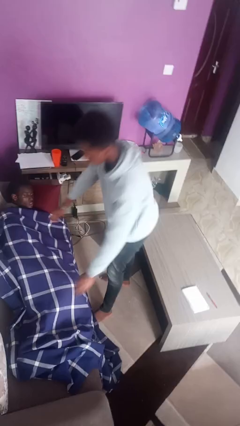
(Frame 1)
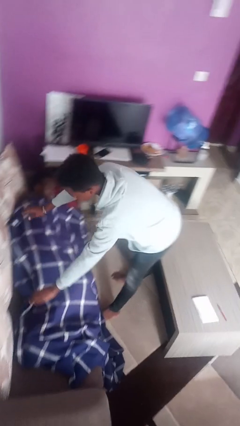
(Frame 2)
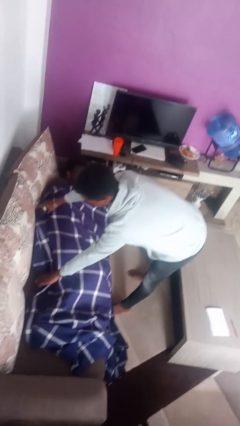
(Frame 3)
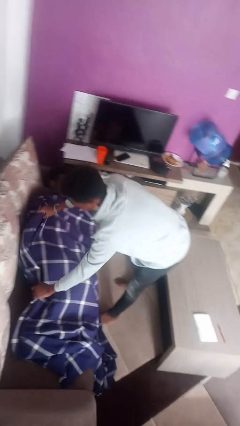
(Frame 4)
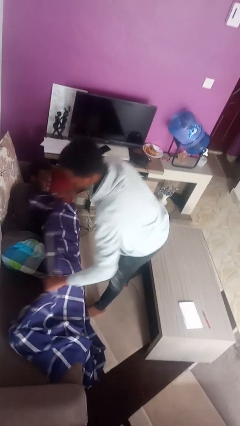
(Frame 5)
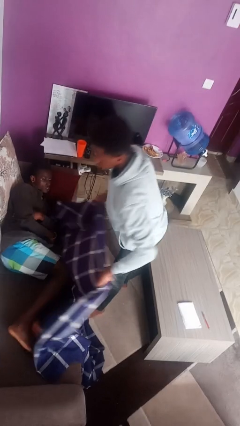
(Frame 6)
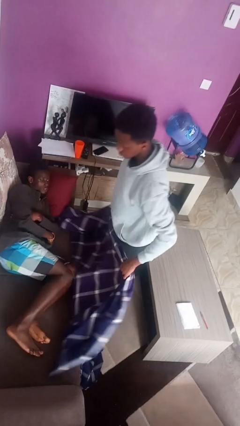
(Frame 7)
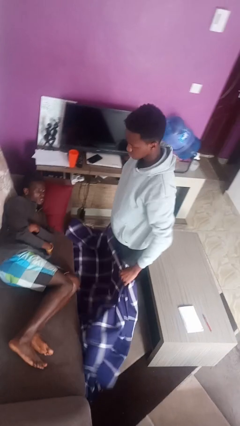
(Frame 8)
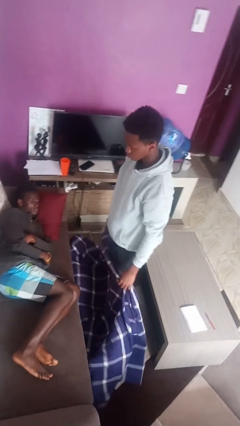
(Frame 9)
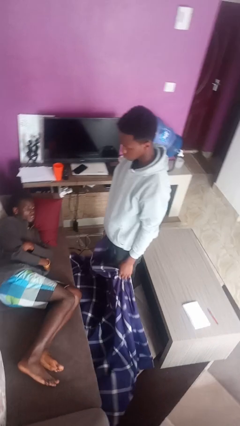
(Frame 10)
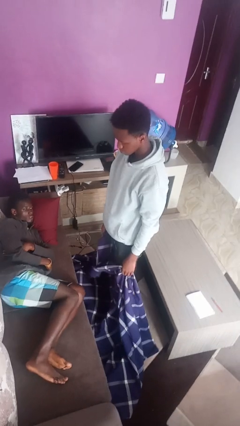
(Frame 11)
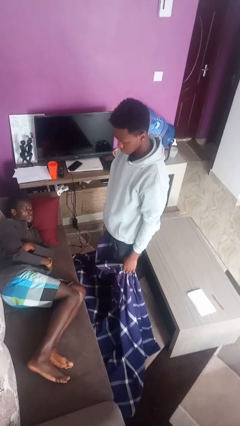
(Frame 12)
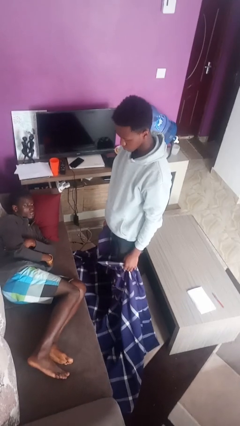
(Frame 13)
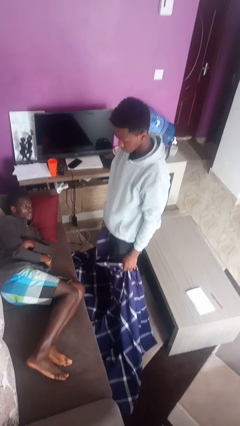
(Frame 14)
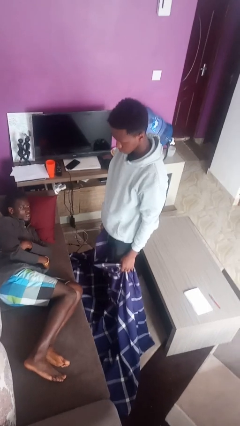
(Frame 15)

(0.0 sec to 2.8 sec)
person uncovers friend with blanket

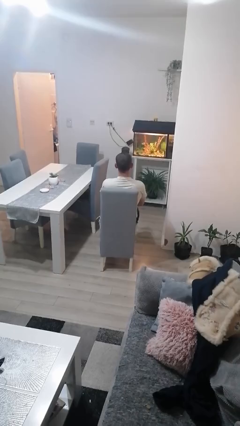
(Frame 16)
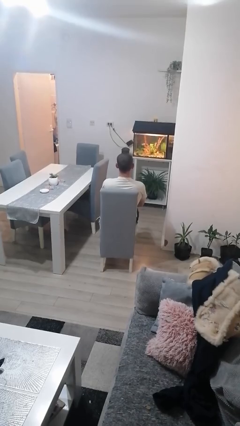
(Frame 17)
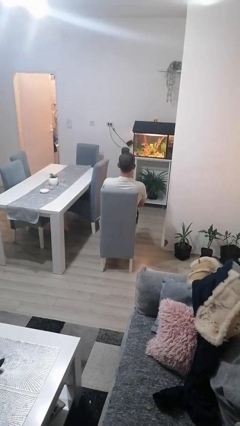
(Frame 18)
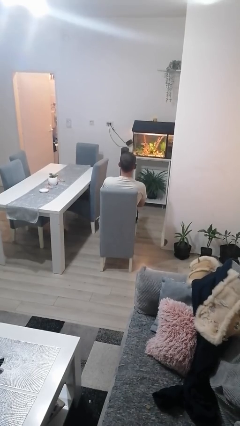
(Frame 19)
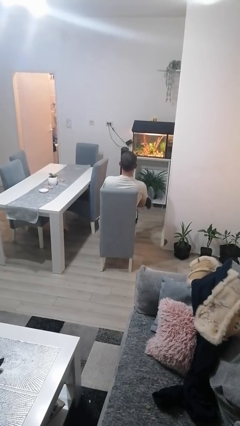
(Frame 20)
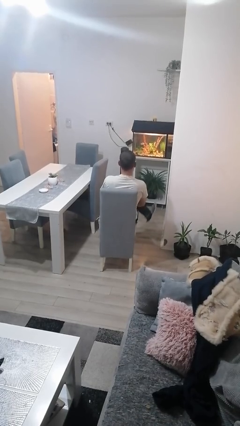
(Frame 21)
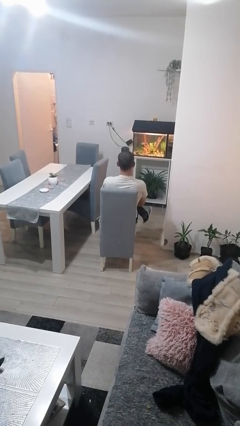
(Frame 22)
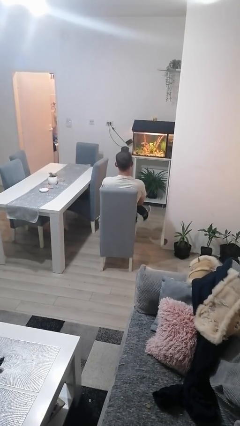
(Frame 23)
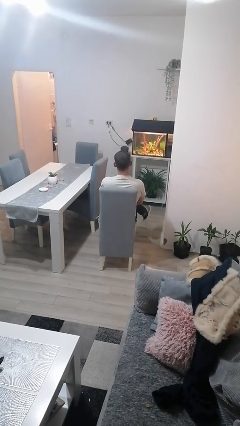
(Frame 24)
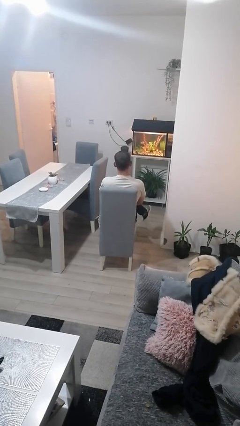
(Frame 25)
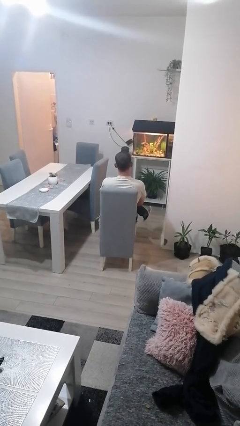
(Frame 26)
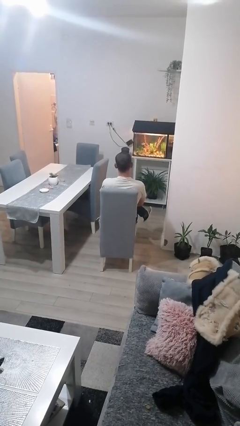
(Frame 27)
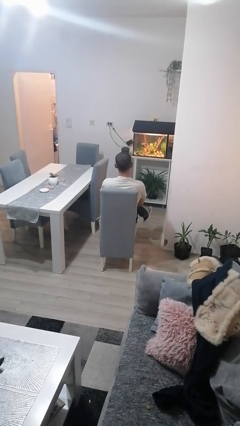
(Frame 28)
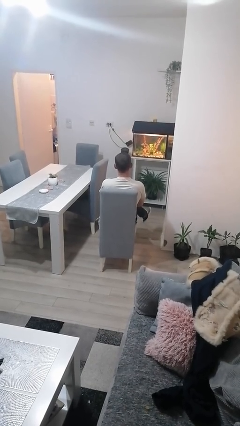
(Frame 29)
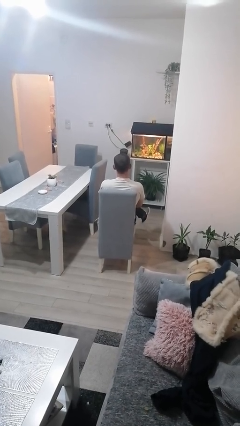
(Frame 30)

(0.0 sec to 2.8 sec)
person crosses legs

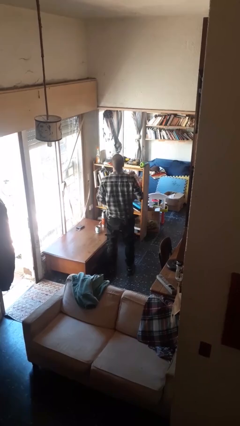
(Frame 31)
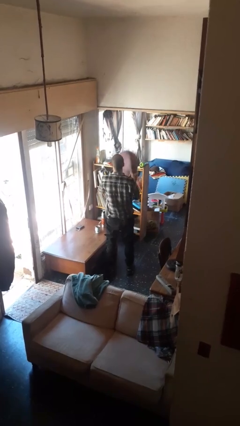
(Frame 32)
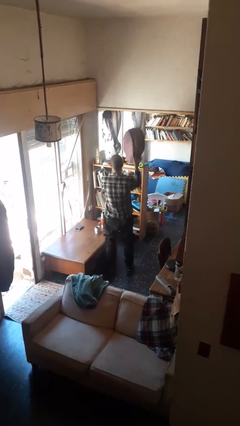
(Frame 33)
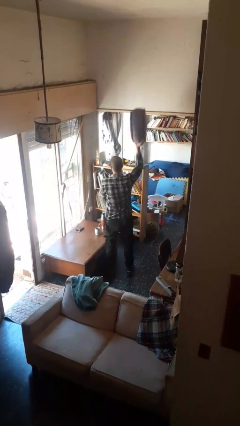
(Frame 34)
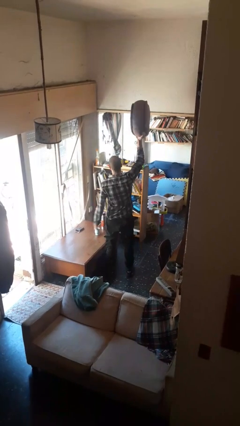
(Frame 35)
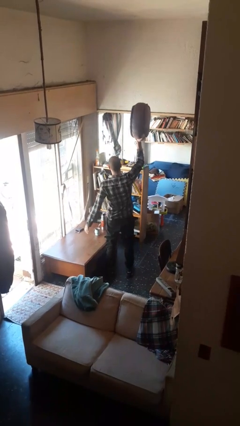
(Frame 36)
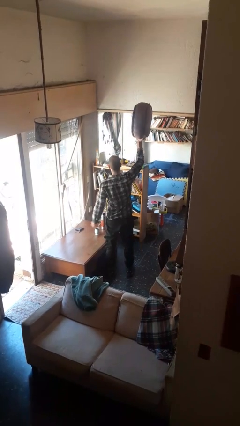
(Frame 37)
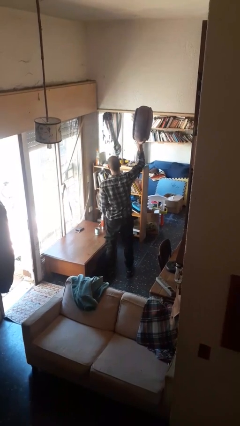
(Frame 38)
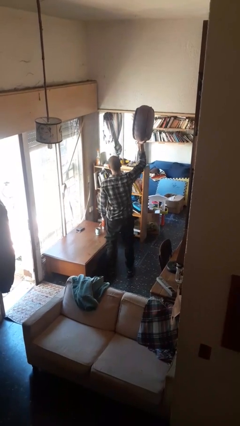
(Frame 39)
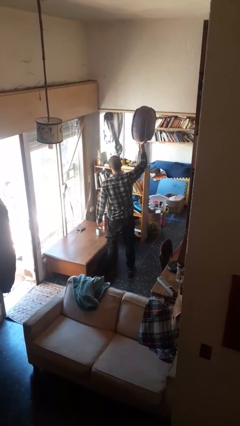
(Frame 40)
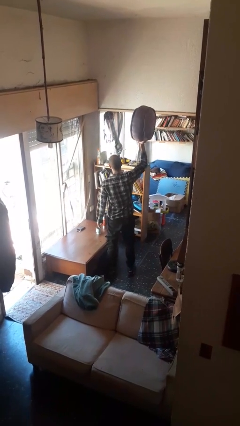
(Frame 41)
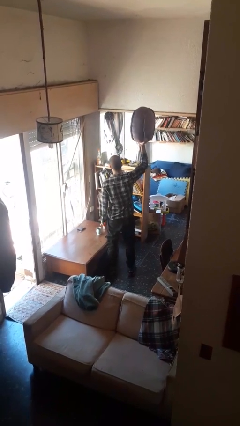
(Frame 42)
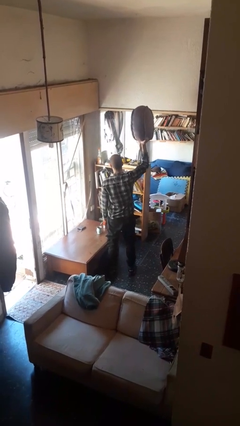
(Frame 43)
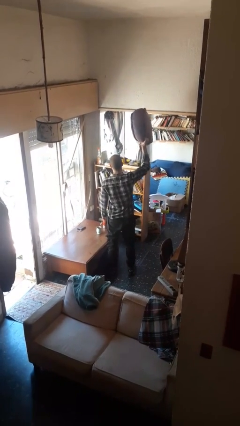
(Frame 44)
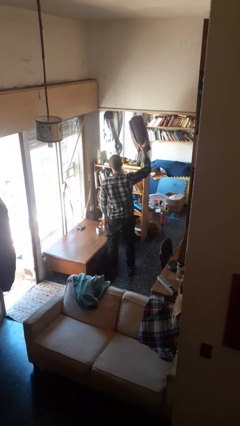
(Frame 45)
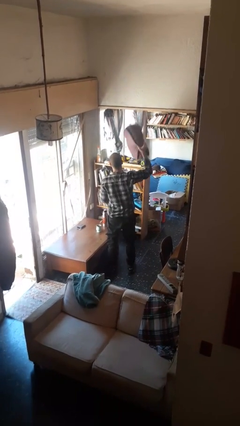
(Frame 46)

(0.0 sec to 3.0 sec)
person holds object above head

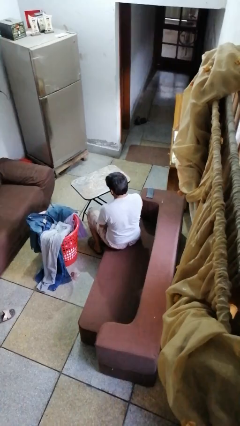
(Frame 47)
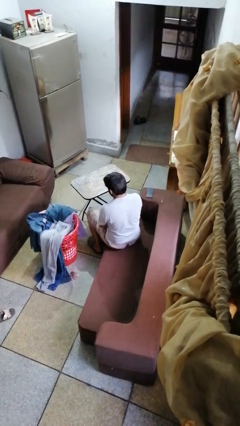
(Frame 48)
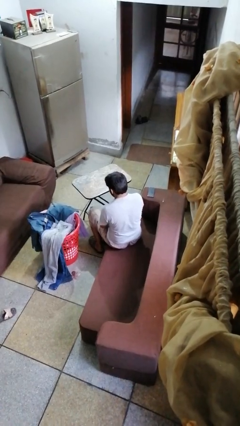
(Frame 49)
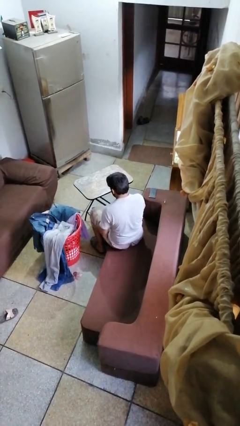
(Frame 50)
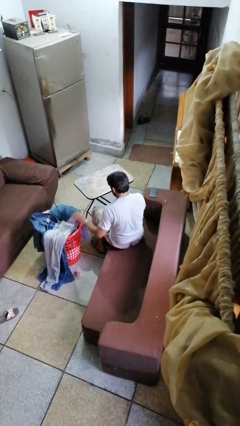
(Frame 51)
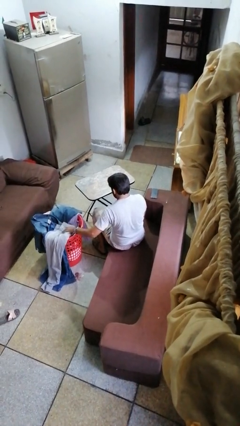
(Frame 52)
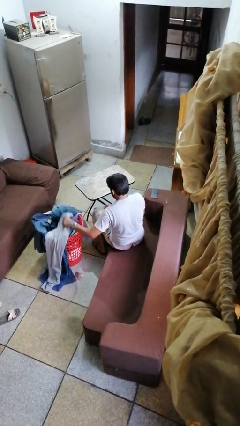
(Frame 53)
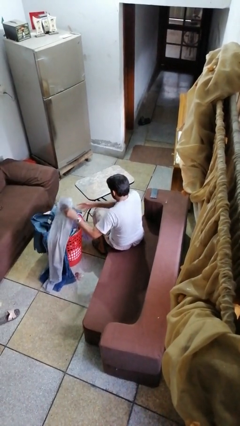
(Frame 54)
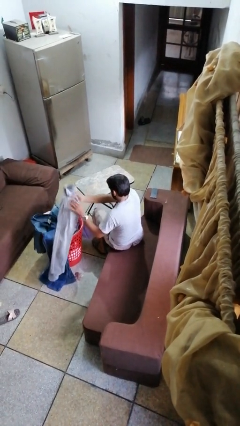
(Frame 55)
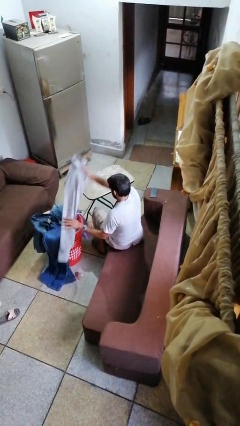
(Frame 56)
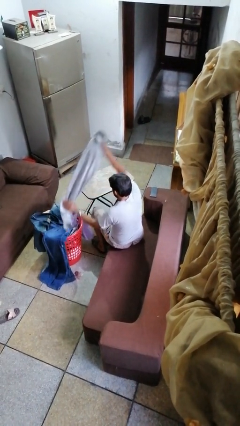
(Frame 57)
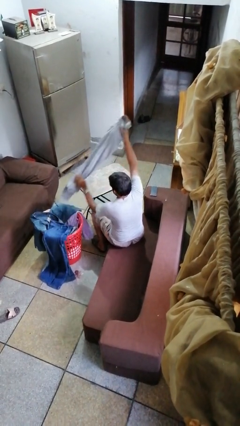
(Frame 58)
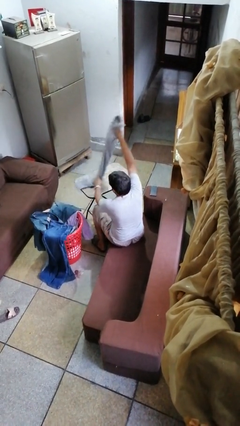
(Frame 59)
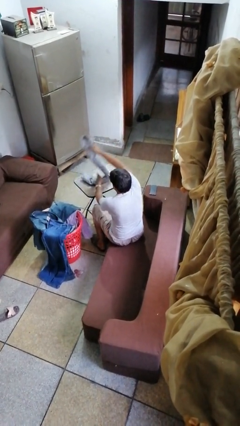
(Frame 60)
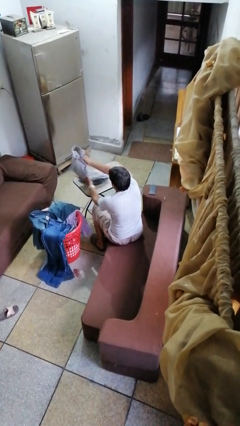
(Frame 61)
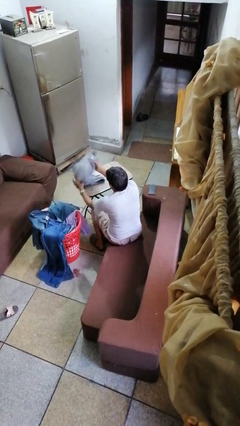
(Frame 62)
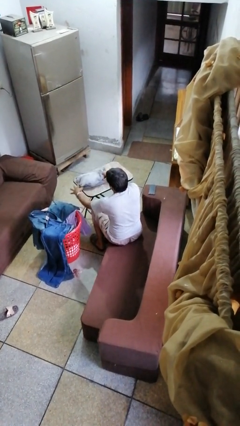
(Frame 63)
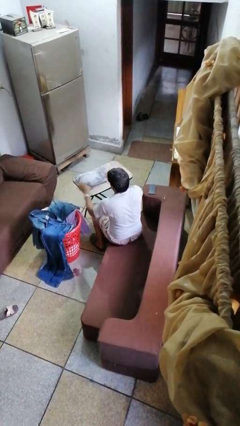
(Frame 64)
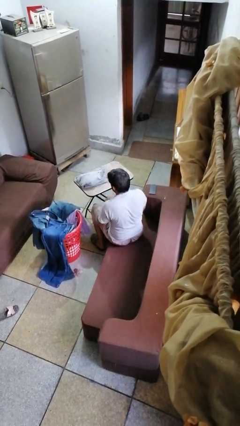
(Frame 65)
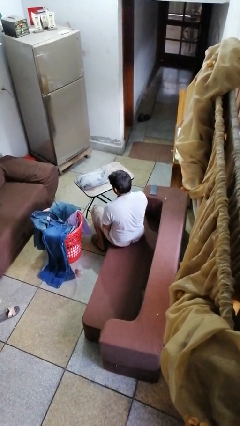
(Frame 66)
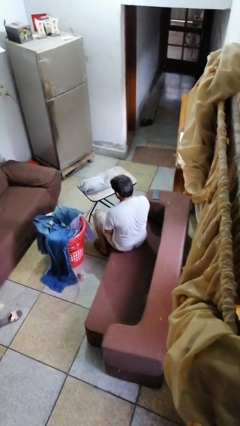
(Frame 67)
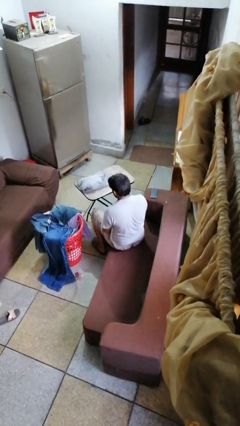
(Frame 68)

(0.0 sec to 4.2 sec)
person folds pants

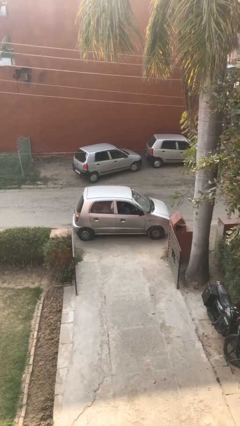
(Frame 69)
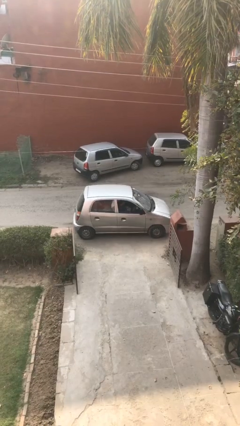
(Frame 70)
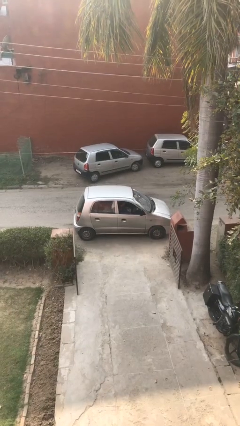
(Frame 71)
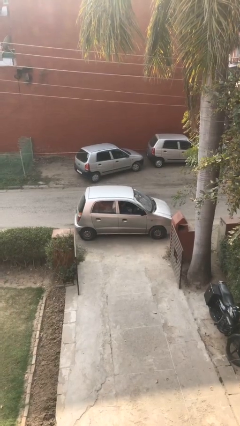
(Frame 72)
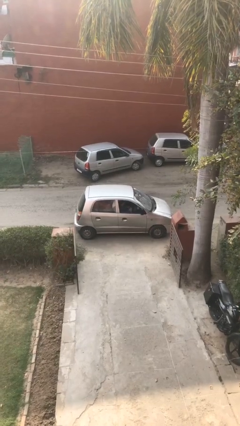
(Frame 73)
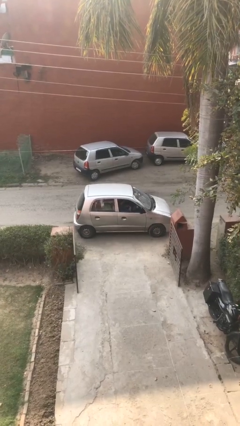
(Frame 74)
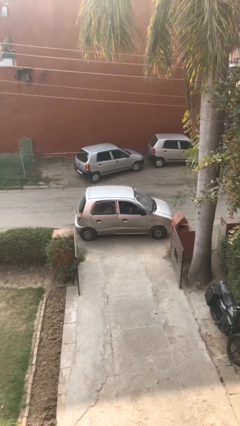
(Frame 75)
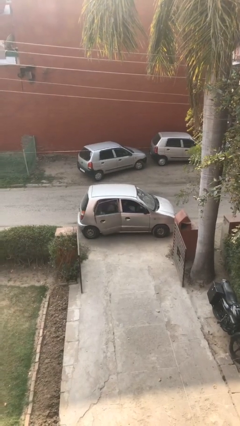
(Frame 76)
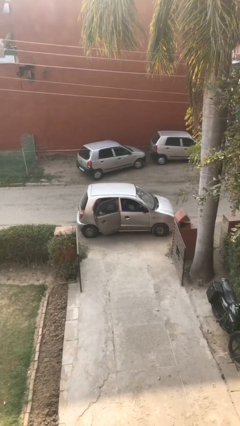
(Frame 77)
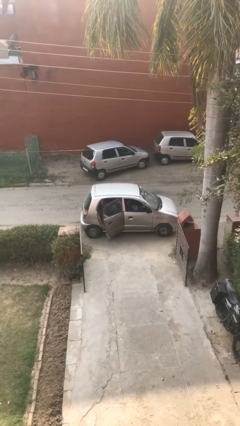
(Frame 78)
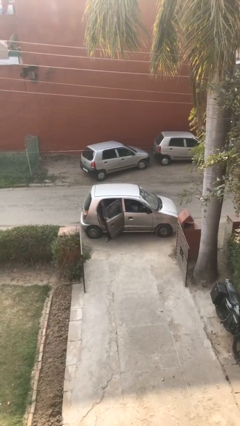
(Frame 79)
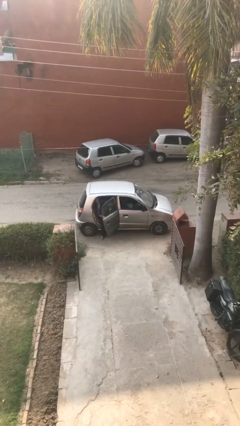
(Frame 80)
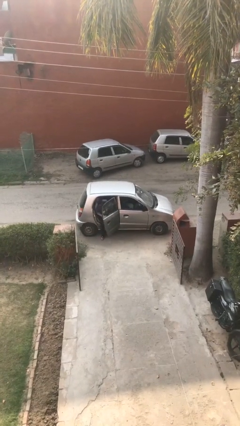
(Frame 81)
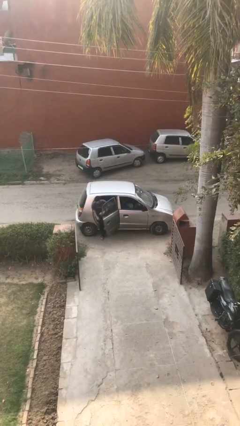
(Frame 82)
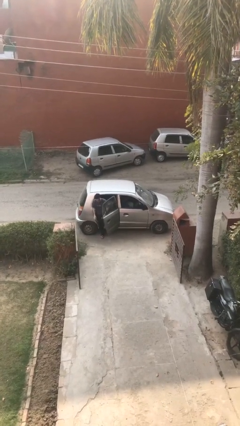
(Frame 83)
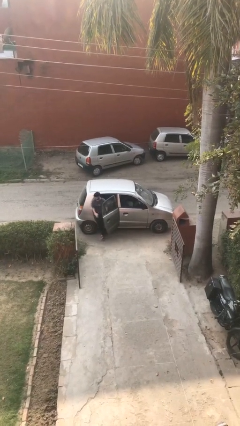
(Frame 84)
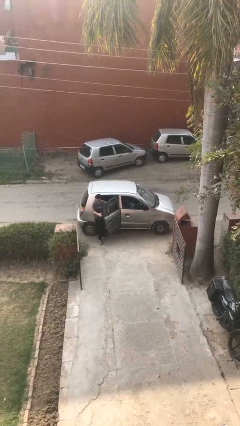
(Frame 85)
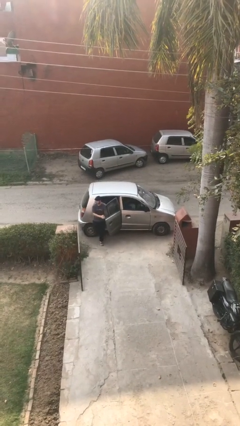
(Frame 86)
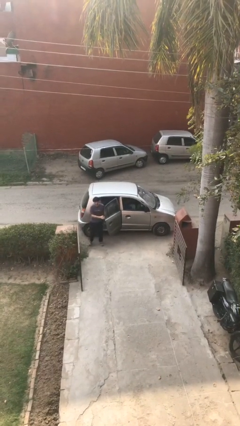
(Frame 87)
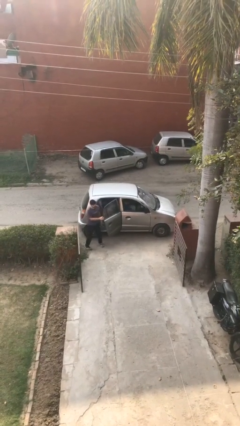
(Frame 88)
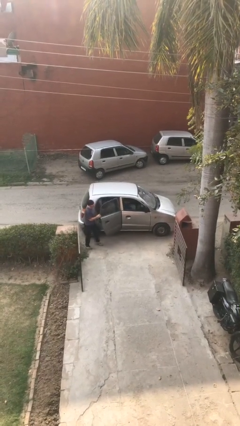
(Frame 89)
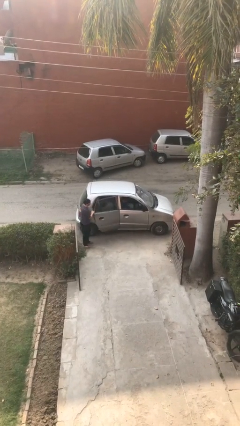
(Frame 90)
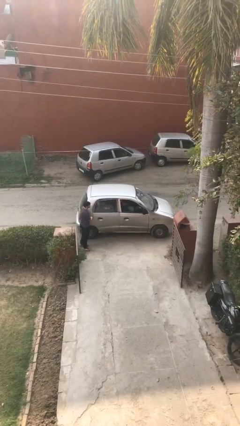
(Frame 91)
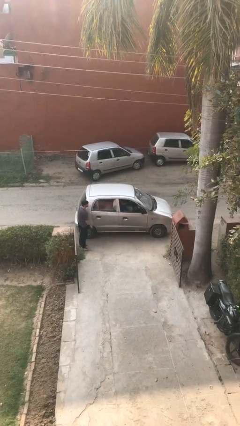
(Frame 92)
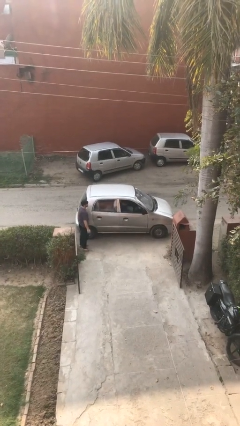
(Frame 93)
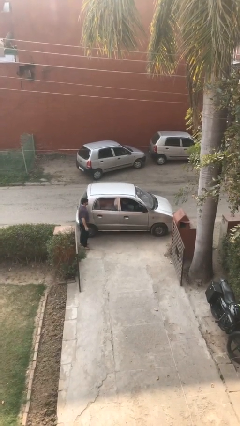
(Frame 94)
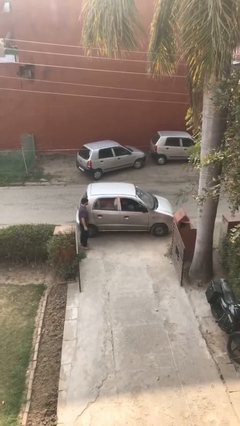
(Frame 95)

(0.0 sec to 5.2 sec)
car drops off person
